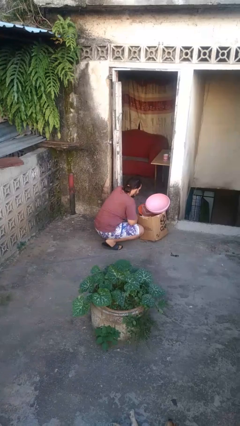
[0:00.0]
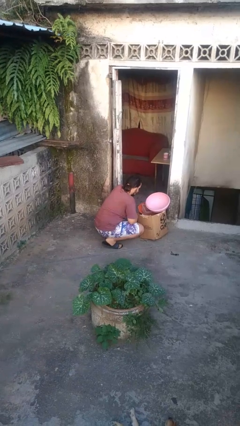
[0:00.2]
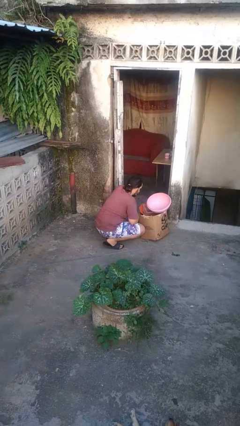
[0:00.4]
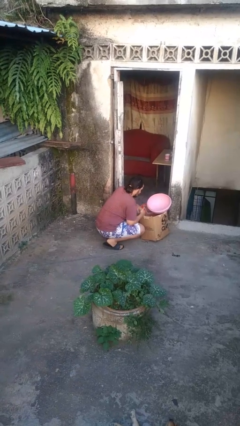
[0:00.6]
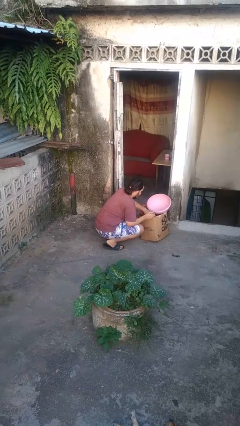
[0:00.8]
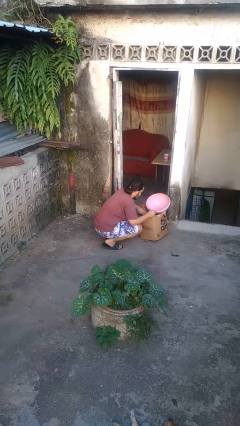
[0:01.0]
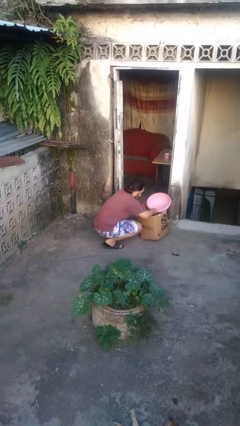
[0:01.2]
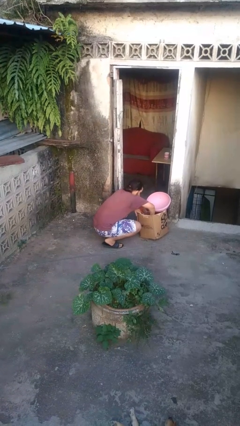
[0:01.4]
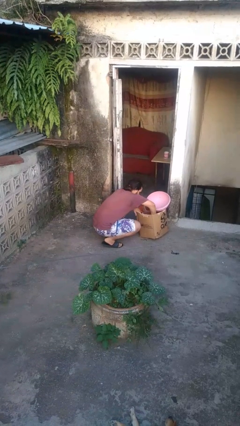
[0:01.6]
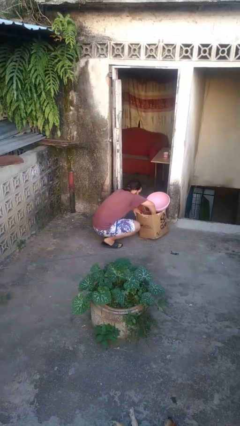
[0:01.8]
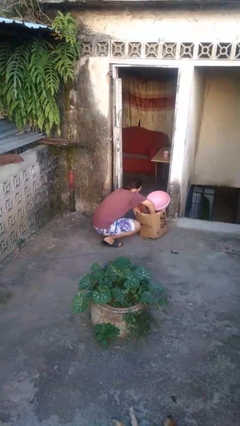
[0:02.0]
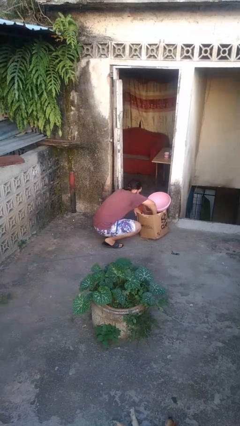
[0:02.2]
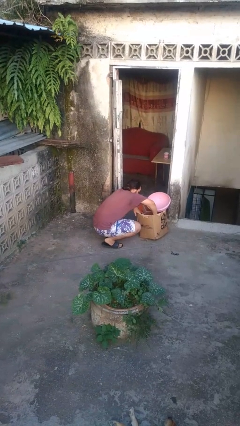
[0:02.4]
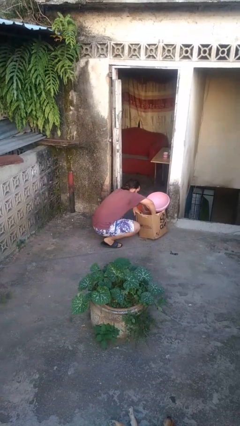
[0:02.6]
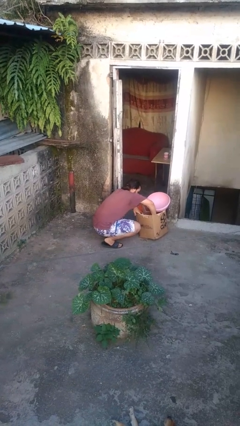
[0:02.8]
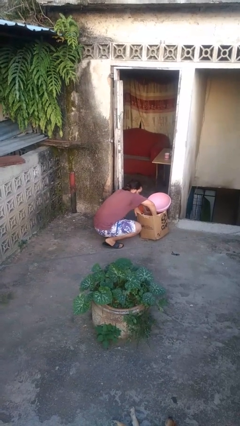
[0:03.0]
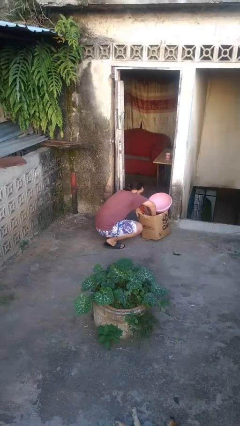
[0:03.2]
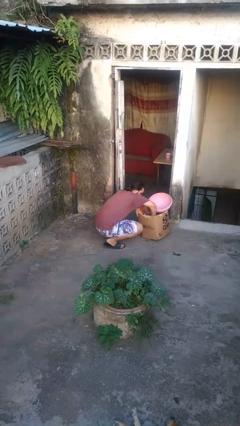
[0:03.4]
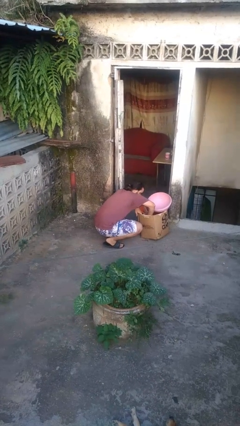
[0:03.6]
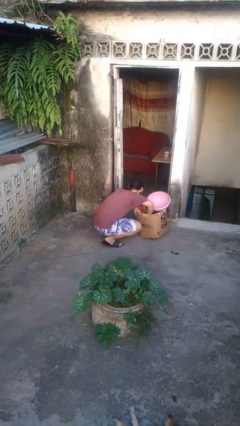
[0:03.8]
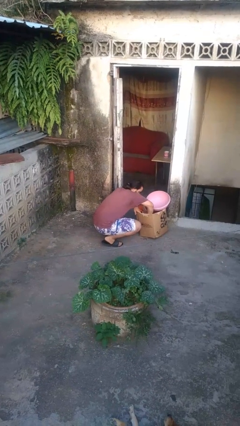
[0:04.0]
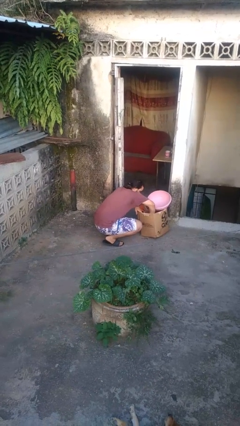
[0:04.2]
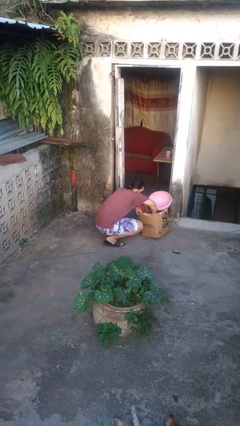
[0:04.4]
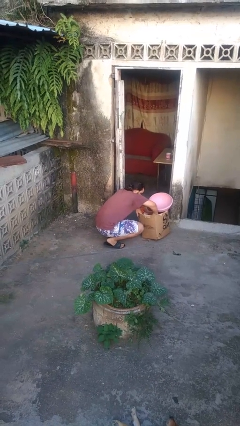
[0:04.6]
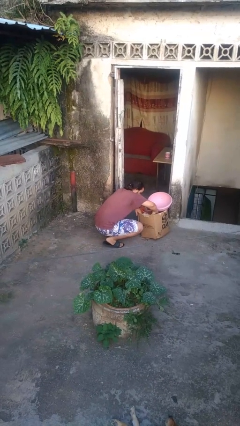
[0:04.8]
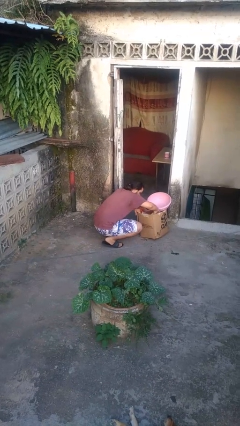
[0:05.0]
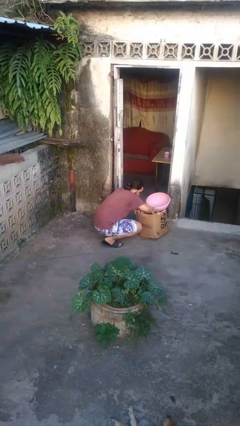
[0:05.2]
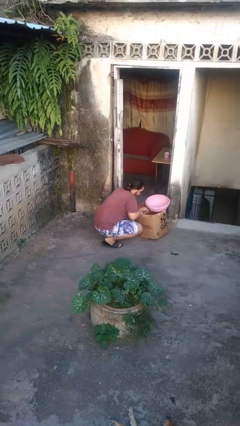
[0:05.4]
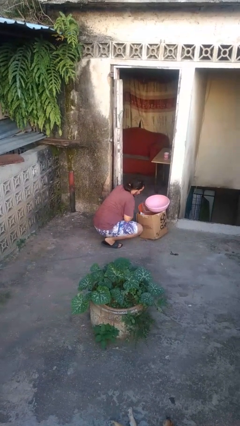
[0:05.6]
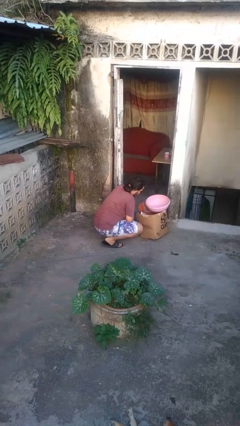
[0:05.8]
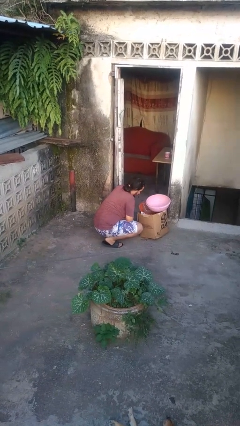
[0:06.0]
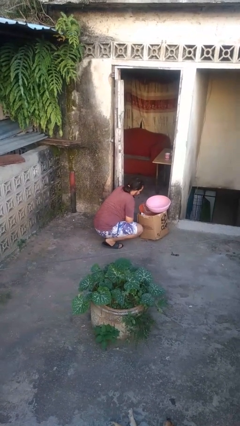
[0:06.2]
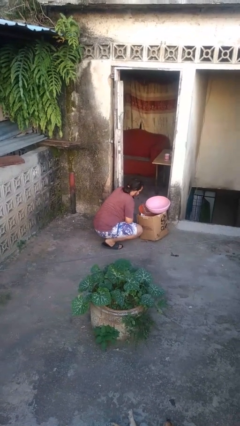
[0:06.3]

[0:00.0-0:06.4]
person searches in box

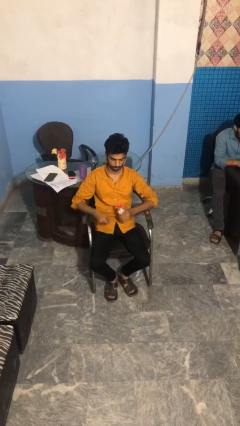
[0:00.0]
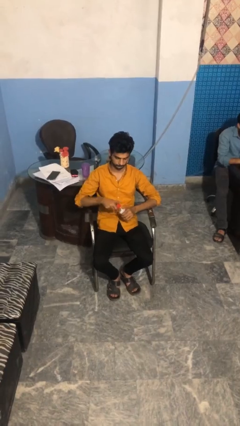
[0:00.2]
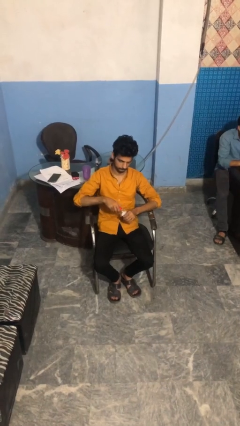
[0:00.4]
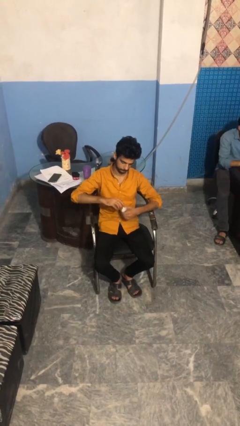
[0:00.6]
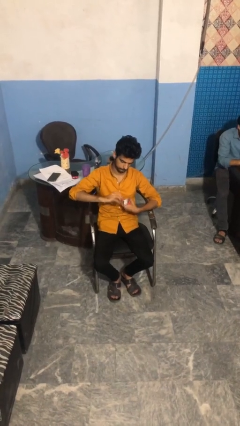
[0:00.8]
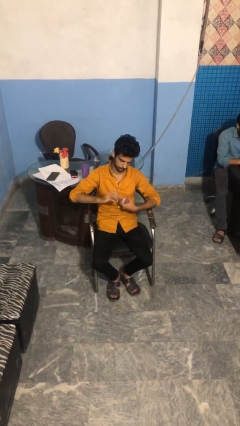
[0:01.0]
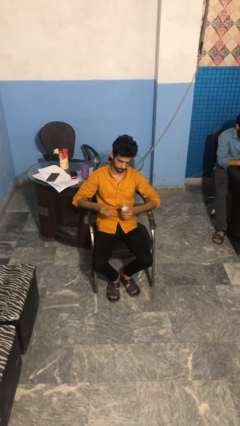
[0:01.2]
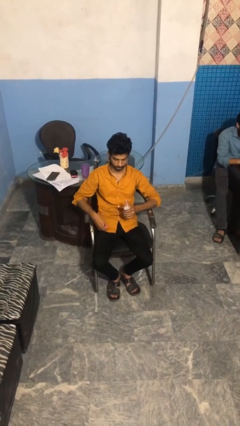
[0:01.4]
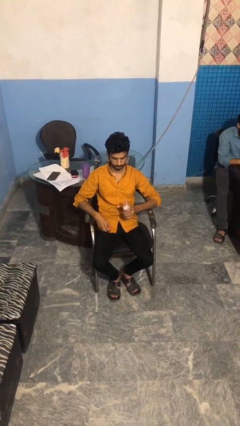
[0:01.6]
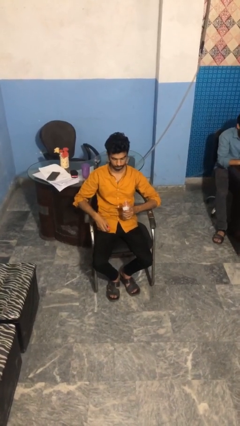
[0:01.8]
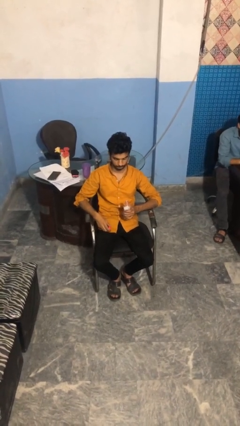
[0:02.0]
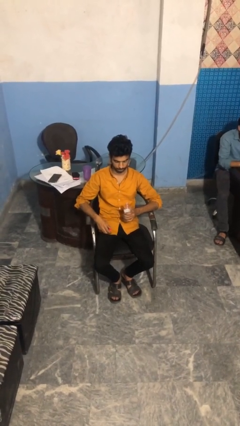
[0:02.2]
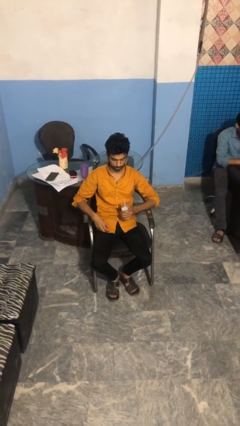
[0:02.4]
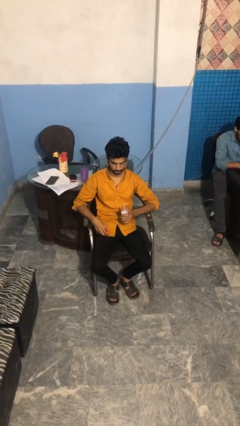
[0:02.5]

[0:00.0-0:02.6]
person unscrews lid from bottle

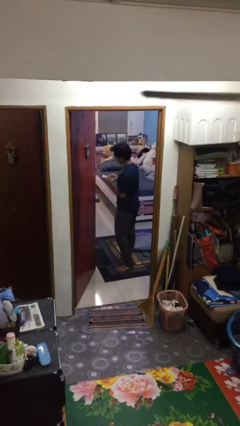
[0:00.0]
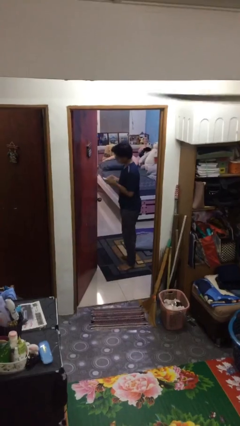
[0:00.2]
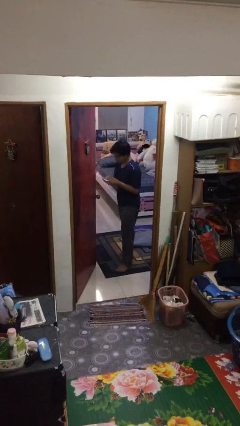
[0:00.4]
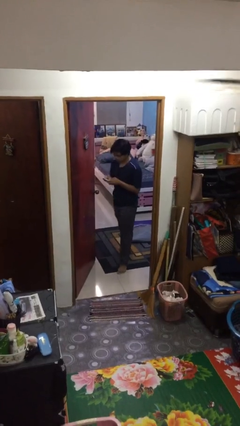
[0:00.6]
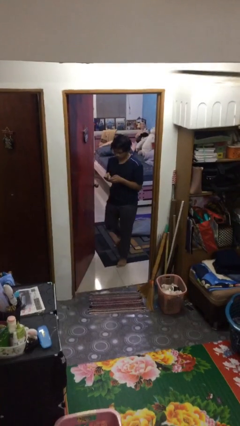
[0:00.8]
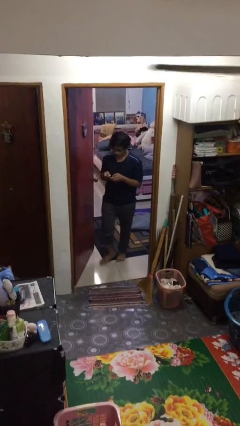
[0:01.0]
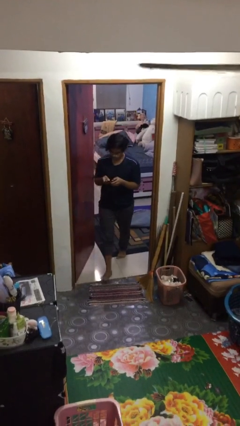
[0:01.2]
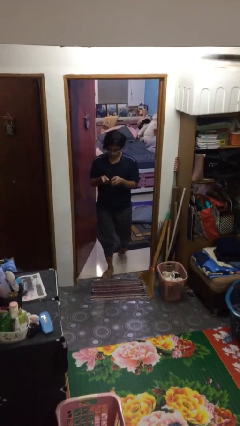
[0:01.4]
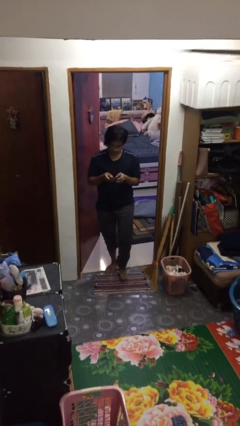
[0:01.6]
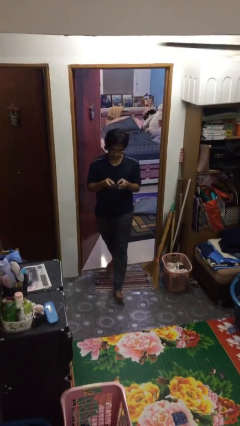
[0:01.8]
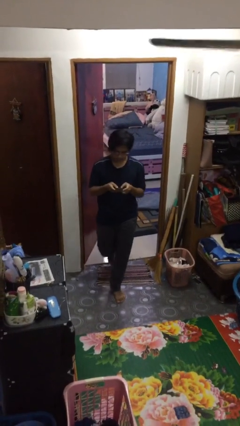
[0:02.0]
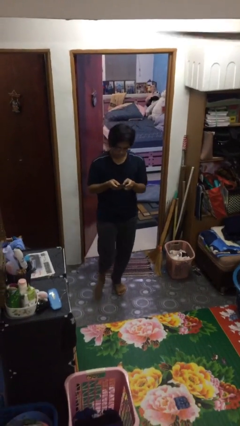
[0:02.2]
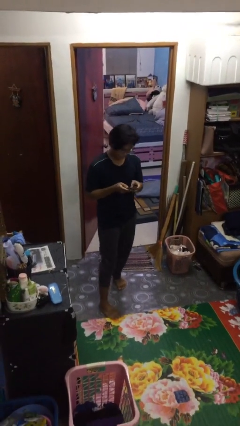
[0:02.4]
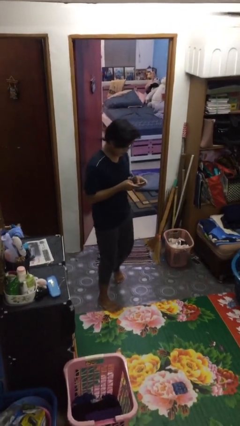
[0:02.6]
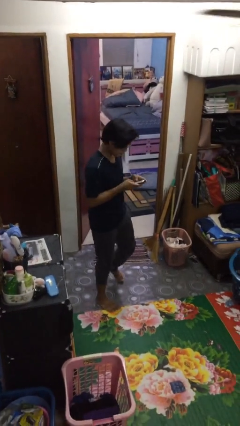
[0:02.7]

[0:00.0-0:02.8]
person enters scene through structure

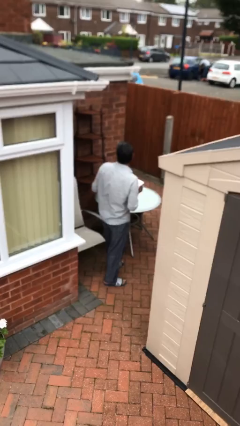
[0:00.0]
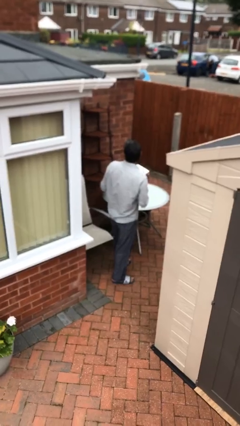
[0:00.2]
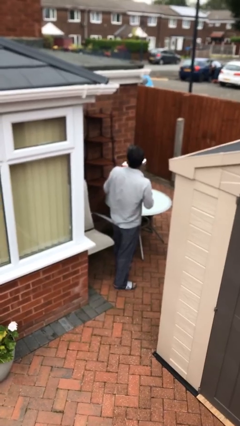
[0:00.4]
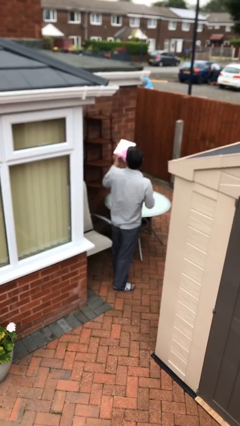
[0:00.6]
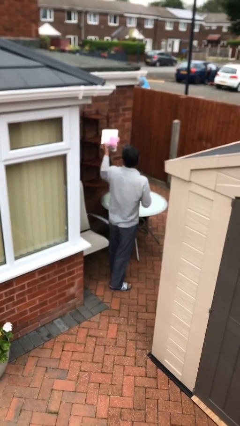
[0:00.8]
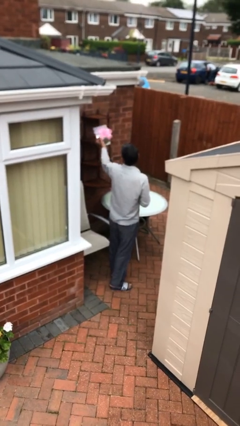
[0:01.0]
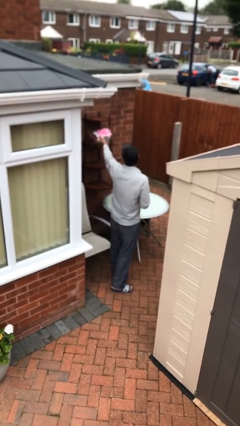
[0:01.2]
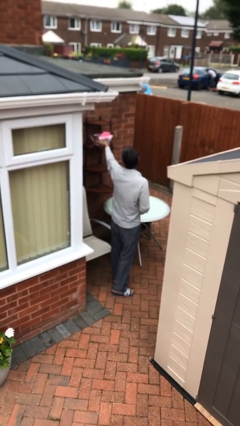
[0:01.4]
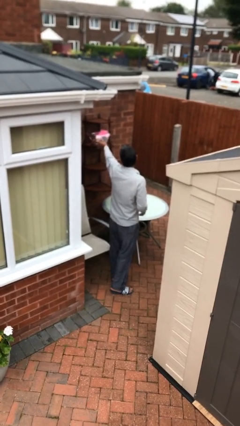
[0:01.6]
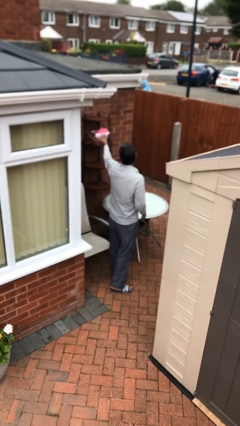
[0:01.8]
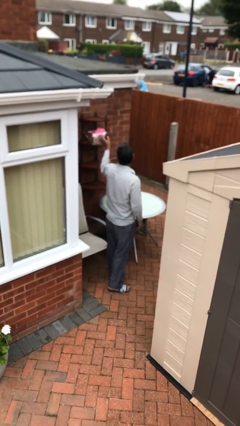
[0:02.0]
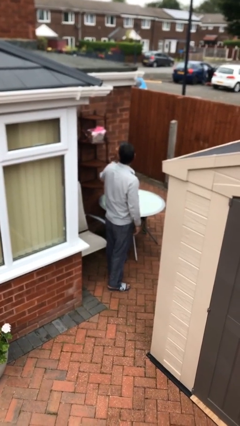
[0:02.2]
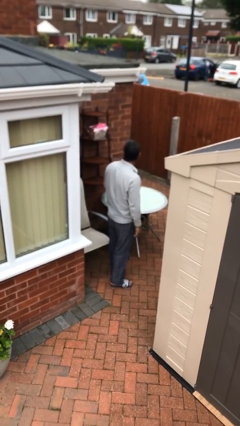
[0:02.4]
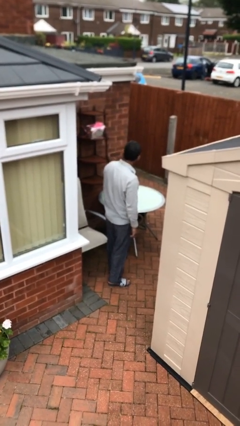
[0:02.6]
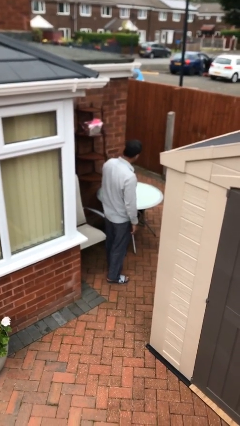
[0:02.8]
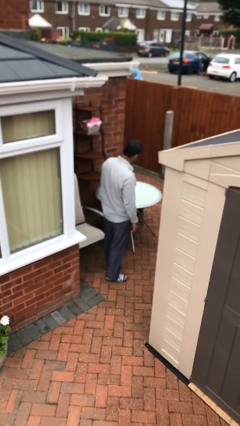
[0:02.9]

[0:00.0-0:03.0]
person puts down object on shelf

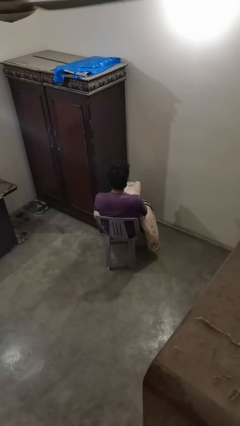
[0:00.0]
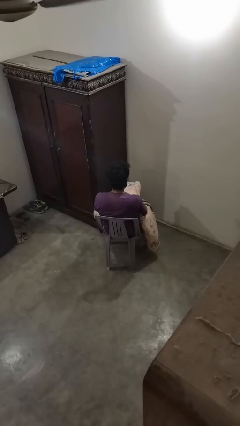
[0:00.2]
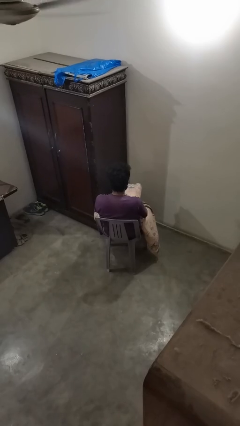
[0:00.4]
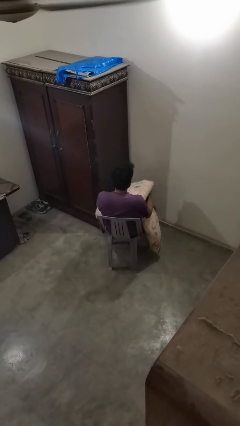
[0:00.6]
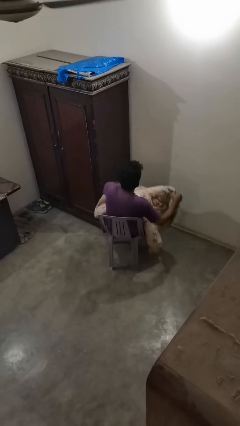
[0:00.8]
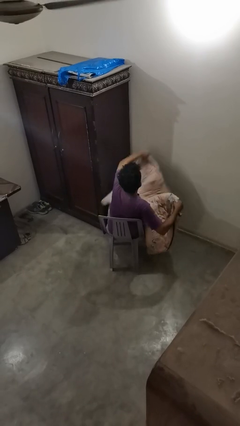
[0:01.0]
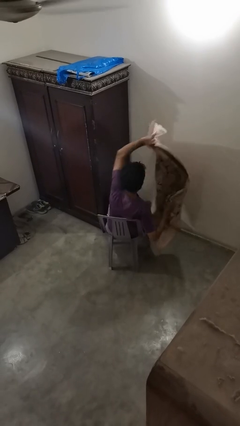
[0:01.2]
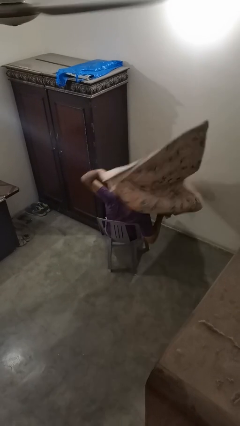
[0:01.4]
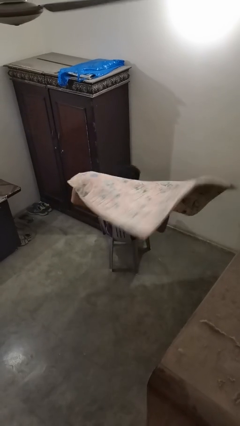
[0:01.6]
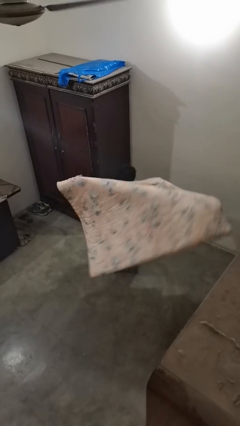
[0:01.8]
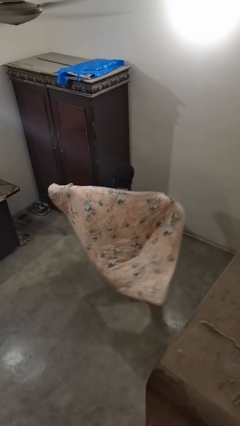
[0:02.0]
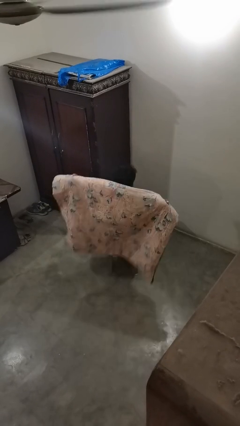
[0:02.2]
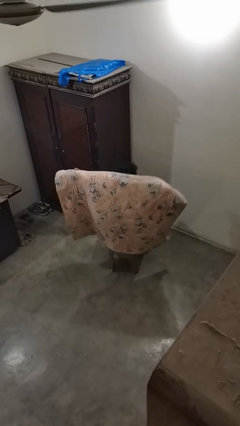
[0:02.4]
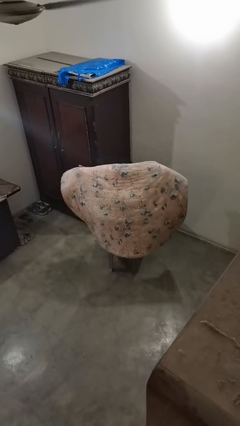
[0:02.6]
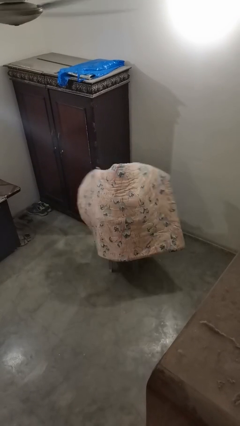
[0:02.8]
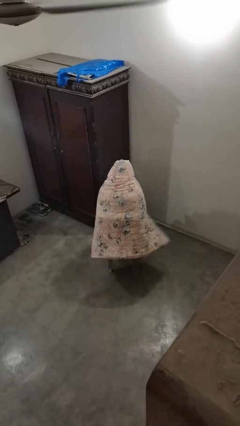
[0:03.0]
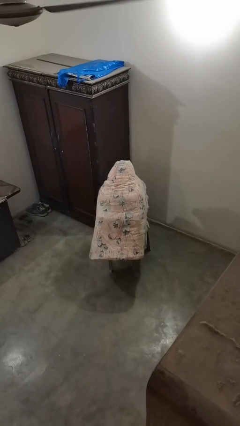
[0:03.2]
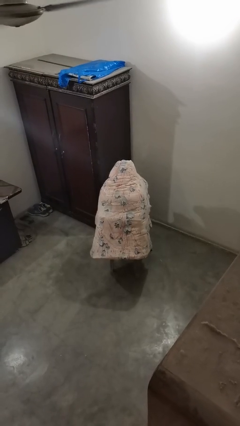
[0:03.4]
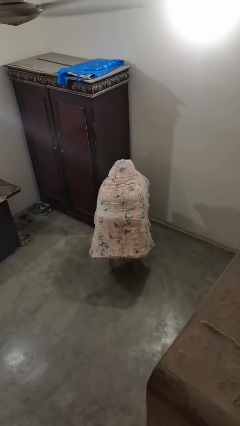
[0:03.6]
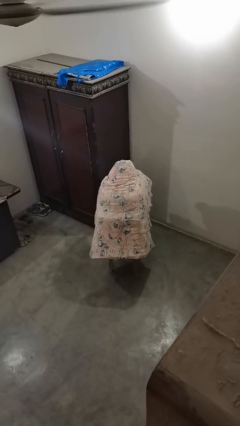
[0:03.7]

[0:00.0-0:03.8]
person covers with blanket
